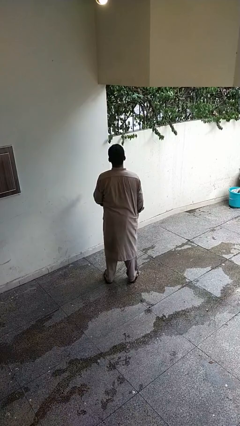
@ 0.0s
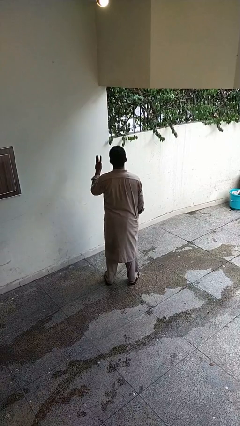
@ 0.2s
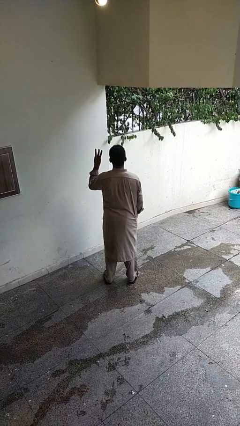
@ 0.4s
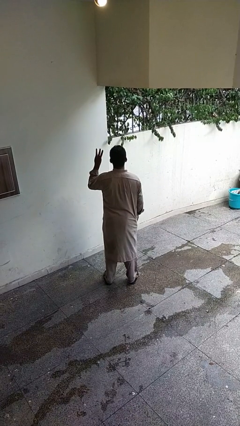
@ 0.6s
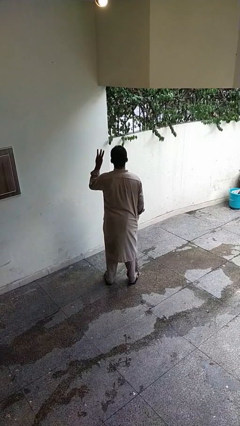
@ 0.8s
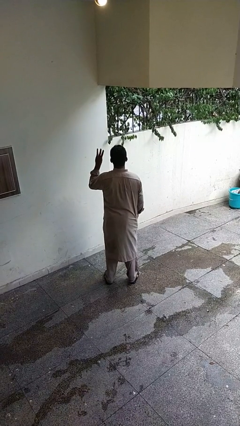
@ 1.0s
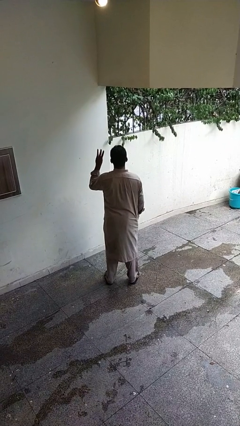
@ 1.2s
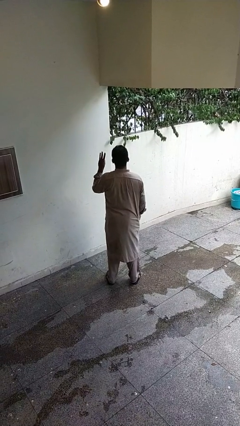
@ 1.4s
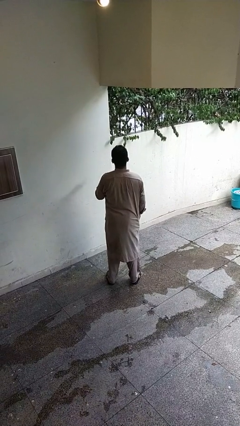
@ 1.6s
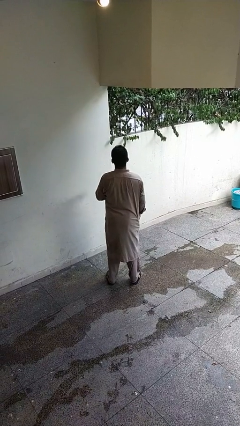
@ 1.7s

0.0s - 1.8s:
person gestures number three

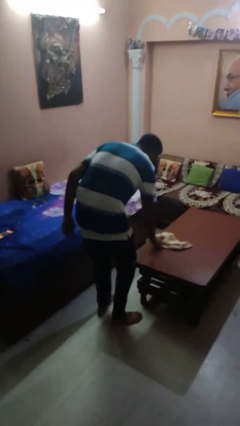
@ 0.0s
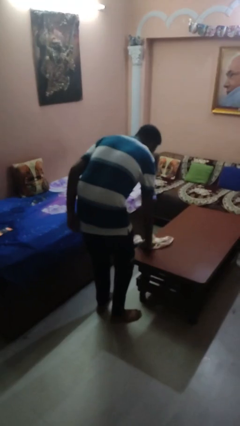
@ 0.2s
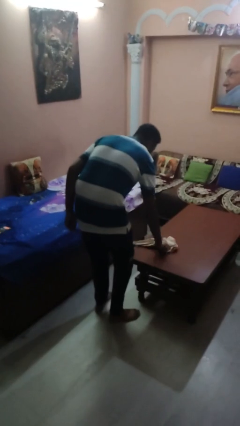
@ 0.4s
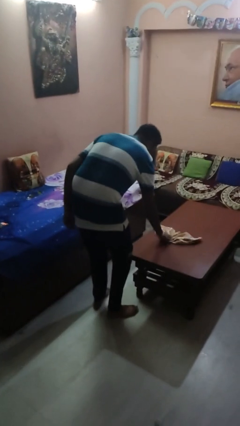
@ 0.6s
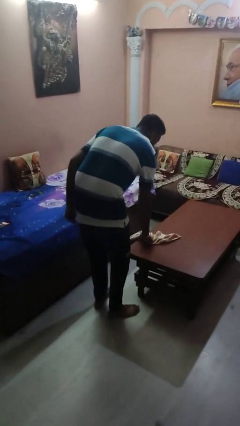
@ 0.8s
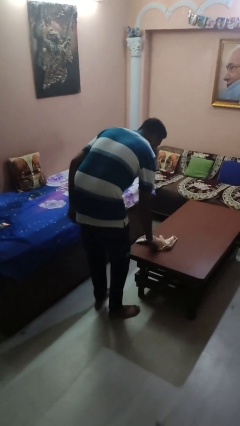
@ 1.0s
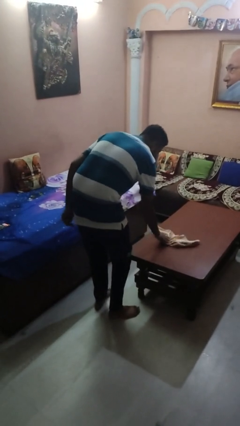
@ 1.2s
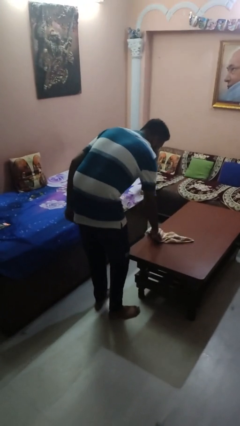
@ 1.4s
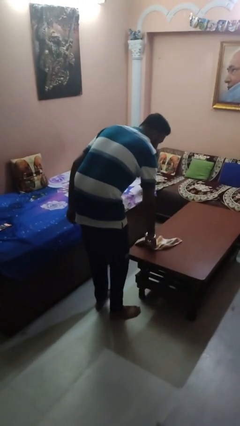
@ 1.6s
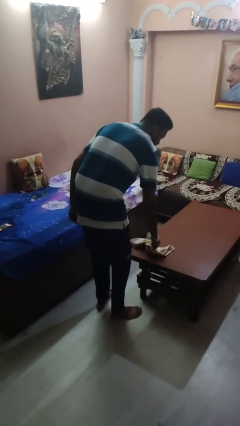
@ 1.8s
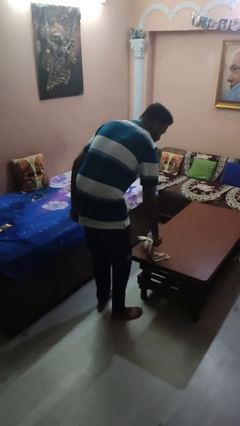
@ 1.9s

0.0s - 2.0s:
person cleans table with rag

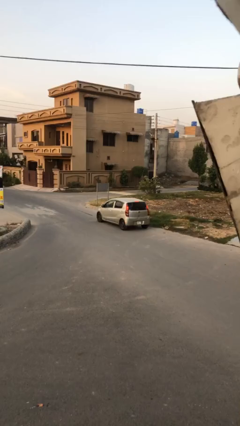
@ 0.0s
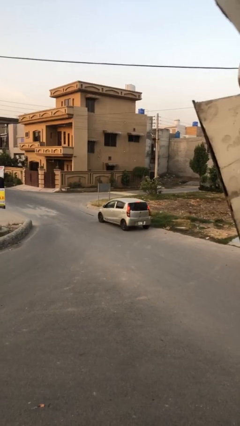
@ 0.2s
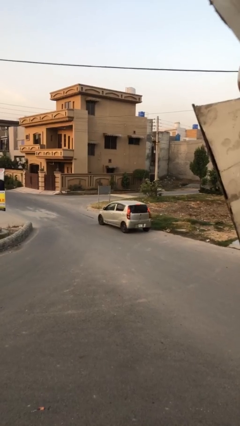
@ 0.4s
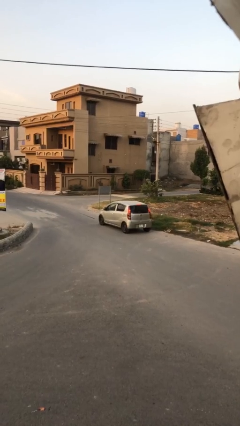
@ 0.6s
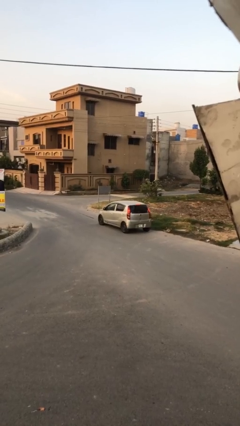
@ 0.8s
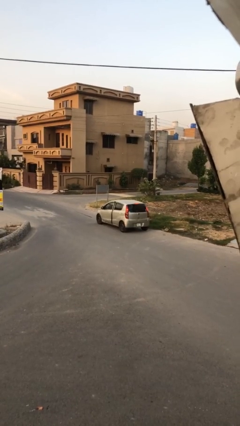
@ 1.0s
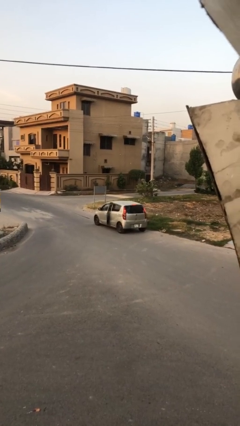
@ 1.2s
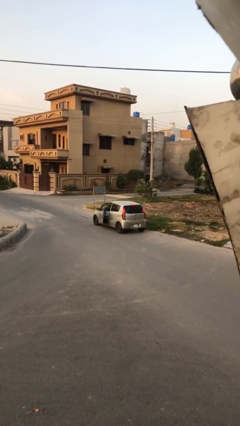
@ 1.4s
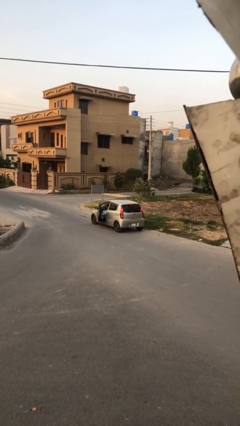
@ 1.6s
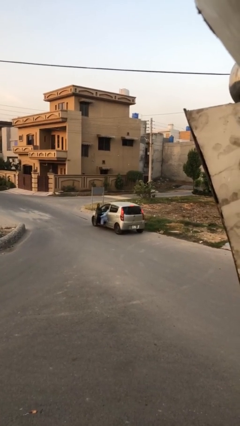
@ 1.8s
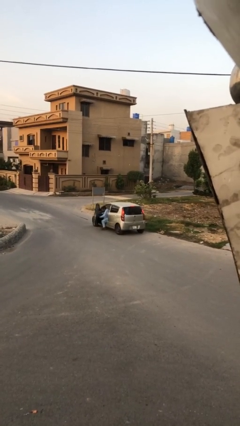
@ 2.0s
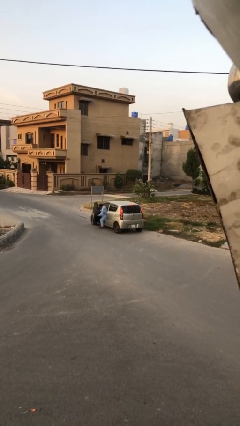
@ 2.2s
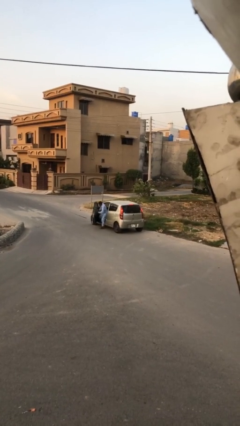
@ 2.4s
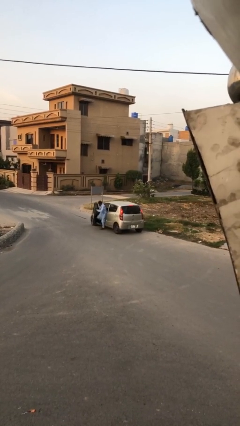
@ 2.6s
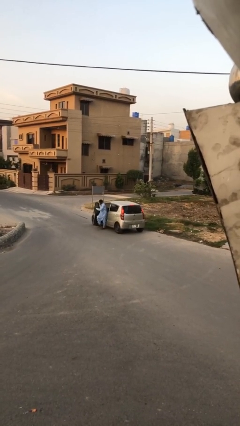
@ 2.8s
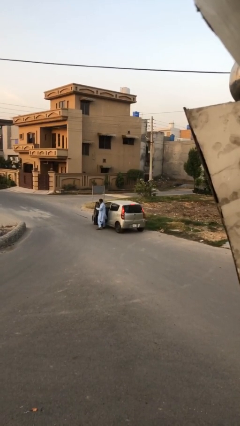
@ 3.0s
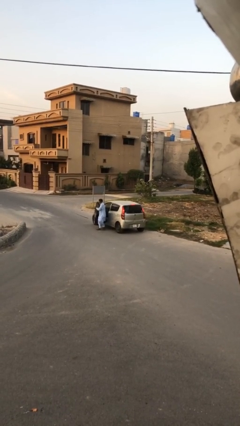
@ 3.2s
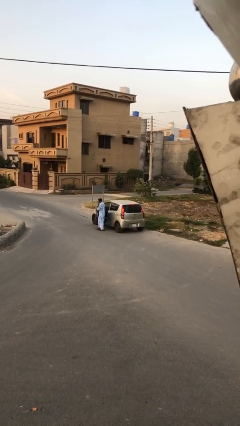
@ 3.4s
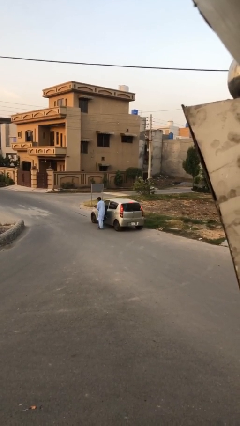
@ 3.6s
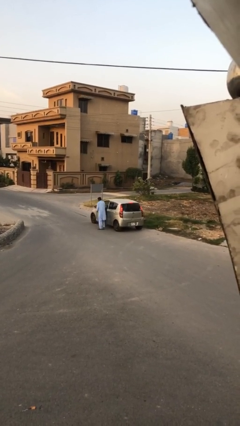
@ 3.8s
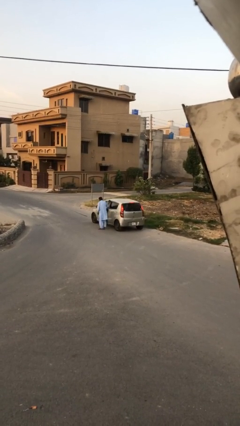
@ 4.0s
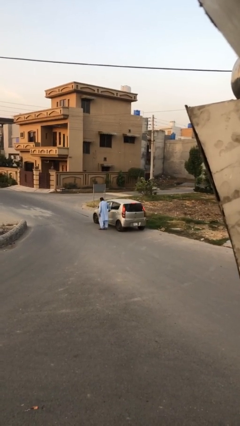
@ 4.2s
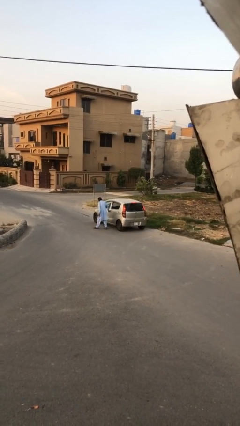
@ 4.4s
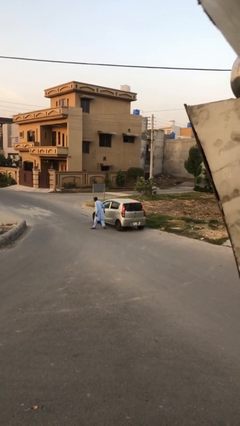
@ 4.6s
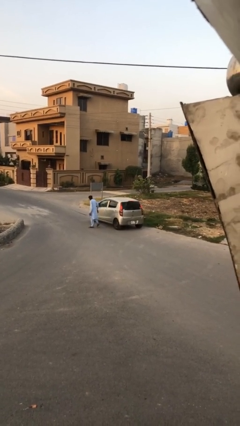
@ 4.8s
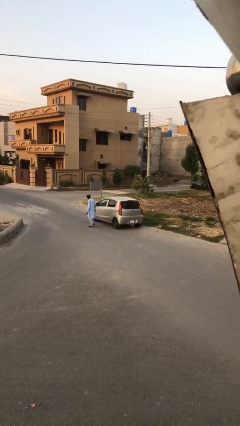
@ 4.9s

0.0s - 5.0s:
car drops off person

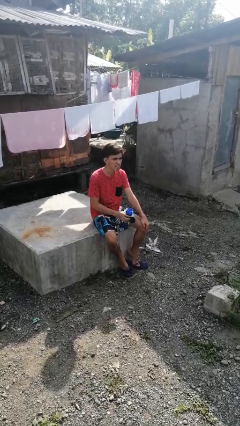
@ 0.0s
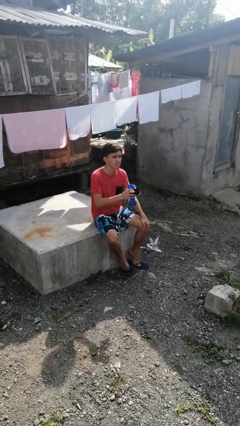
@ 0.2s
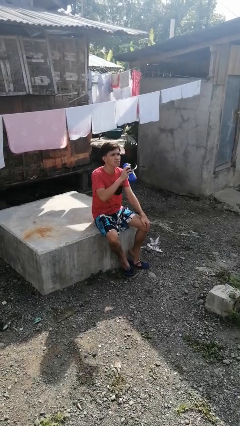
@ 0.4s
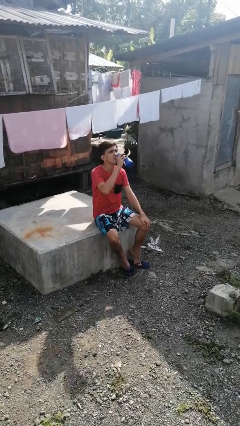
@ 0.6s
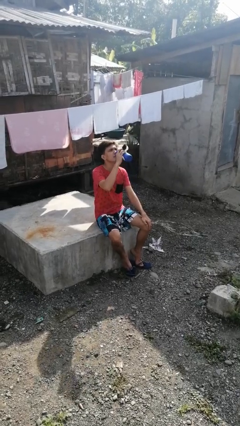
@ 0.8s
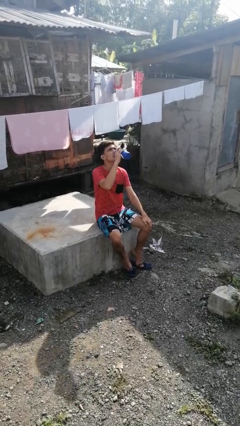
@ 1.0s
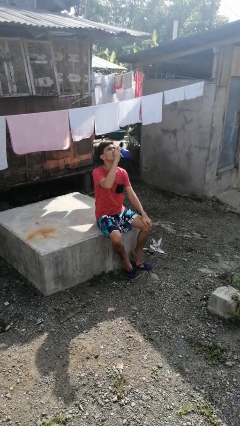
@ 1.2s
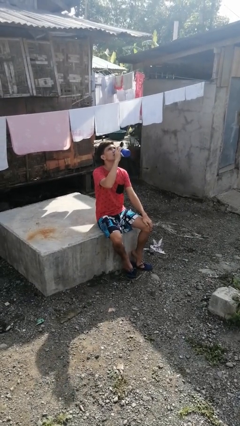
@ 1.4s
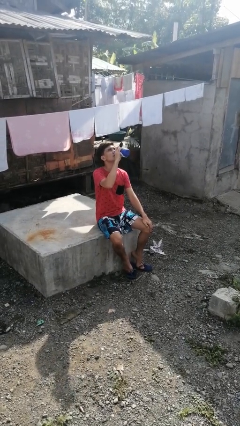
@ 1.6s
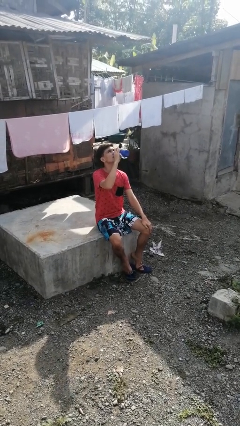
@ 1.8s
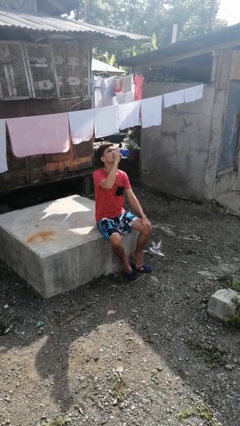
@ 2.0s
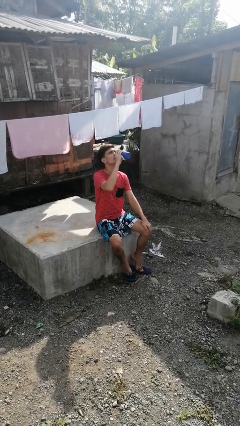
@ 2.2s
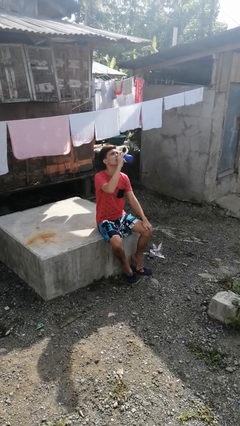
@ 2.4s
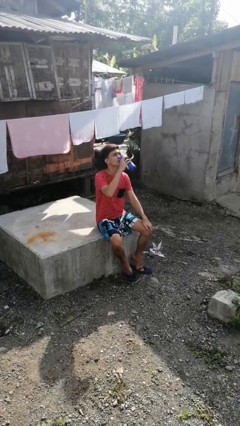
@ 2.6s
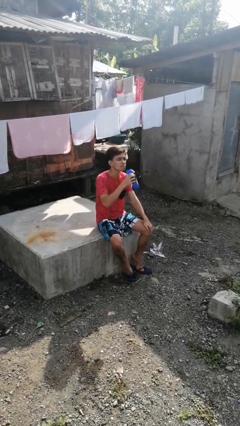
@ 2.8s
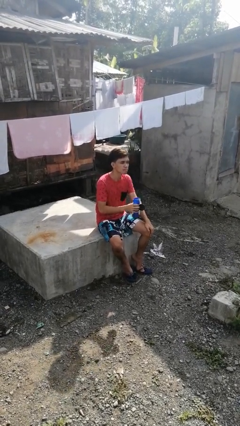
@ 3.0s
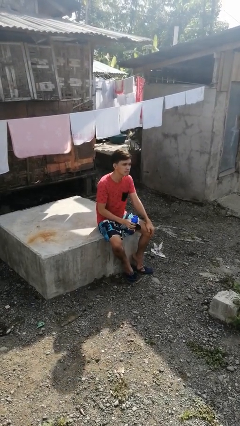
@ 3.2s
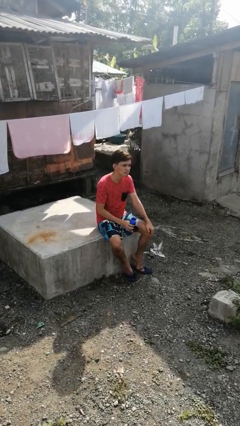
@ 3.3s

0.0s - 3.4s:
person drinks from bottle

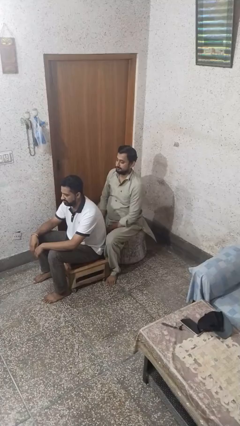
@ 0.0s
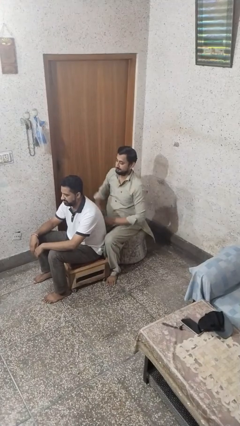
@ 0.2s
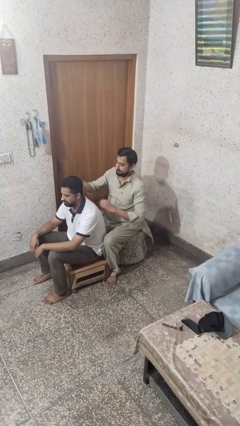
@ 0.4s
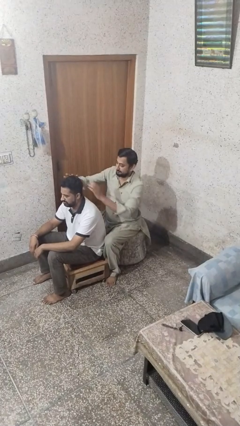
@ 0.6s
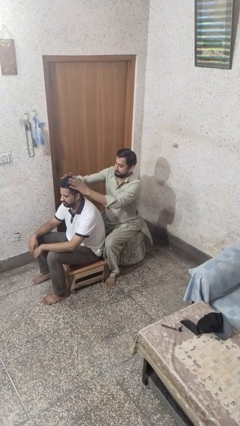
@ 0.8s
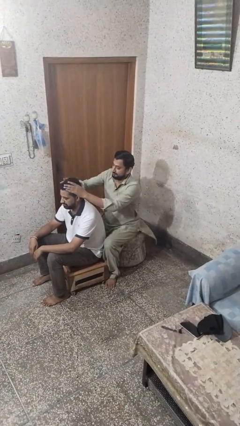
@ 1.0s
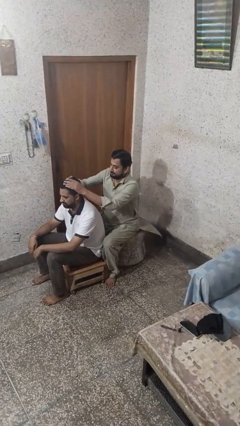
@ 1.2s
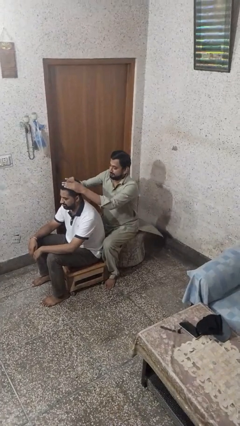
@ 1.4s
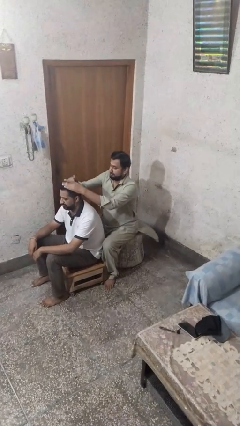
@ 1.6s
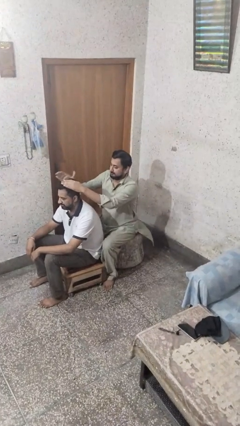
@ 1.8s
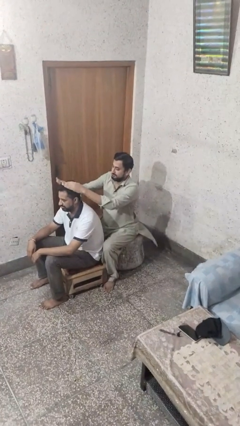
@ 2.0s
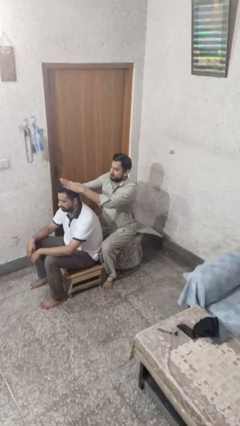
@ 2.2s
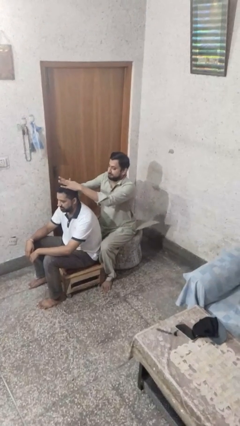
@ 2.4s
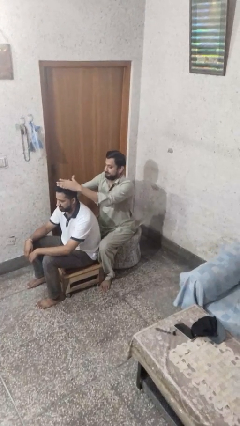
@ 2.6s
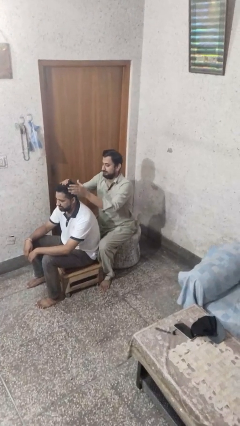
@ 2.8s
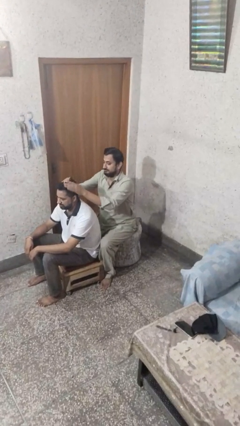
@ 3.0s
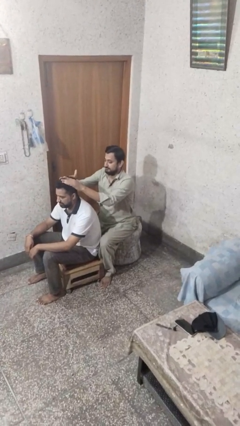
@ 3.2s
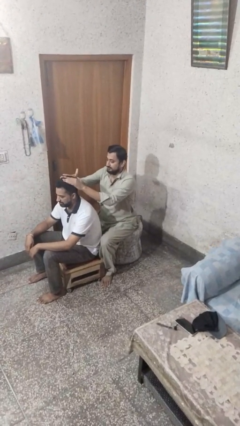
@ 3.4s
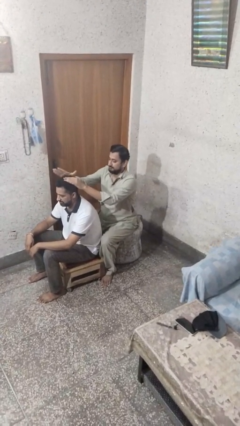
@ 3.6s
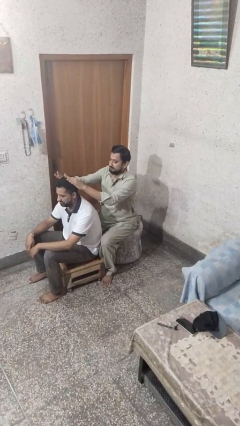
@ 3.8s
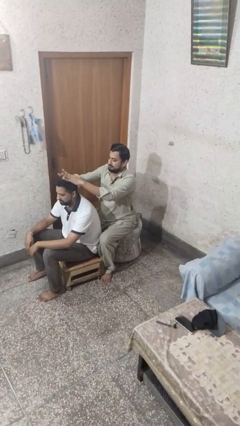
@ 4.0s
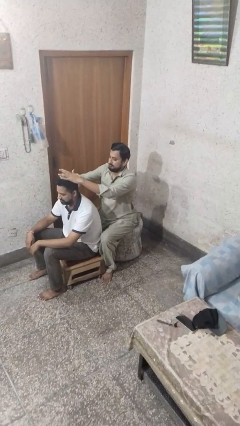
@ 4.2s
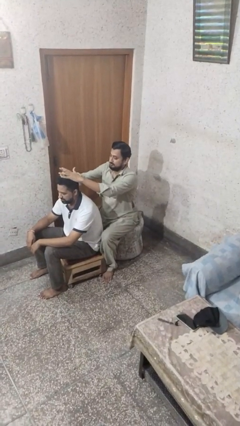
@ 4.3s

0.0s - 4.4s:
person braids hair of person

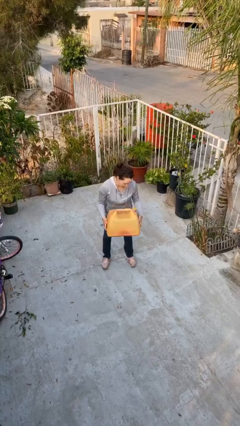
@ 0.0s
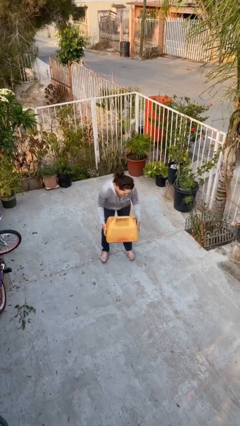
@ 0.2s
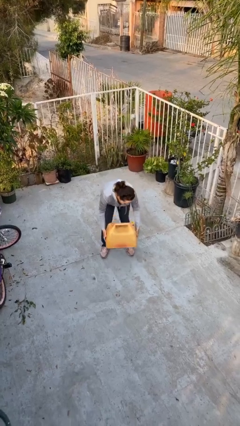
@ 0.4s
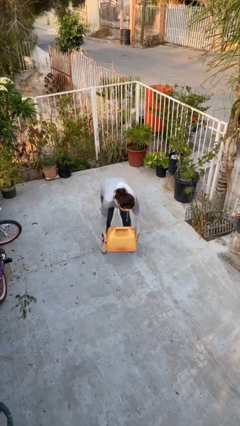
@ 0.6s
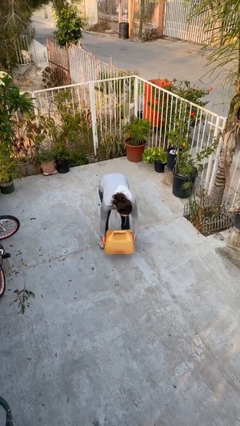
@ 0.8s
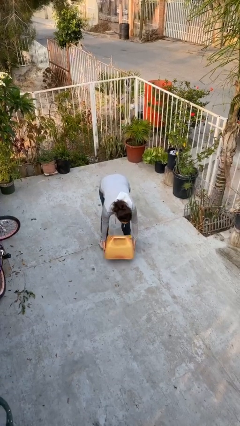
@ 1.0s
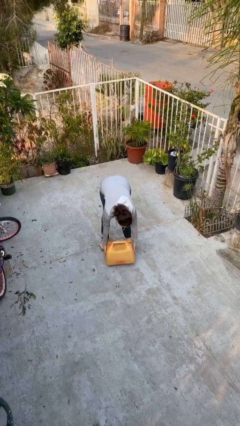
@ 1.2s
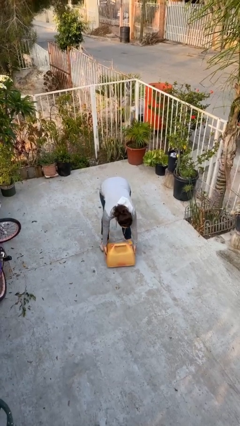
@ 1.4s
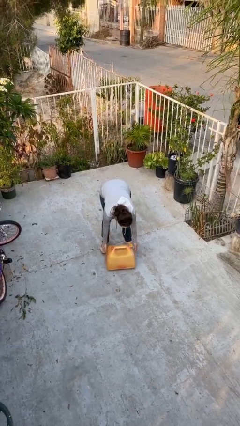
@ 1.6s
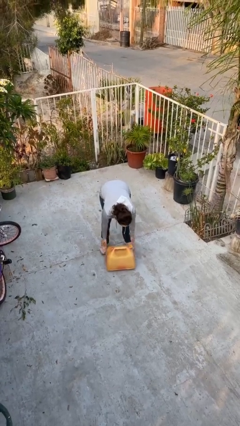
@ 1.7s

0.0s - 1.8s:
person puts down object on floor
